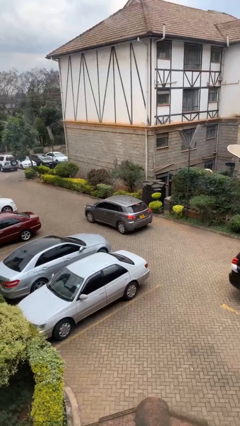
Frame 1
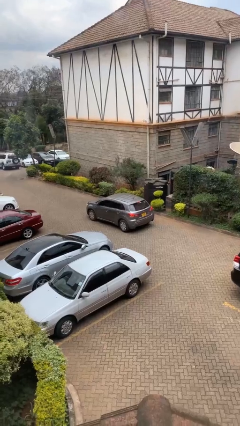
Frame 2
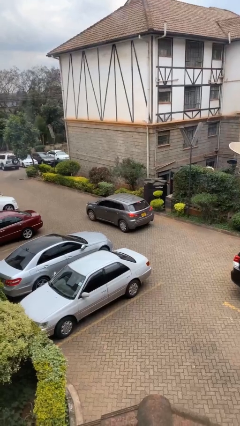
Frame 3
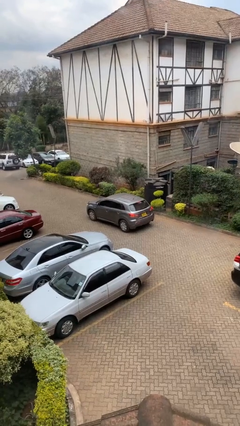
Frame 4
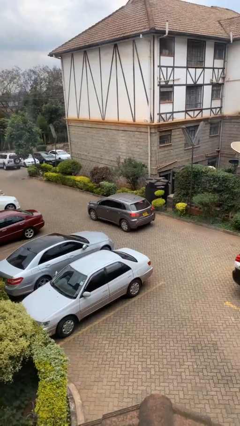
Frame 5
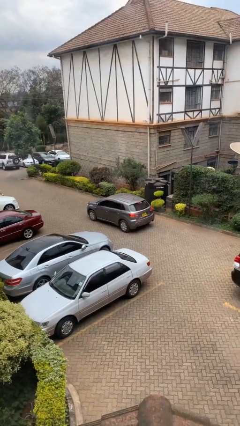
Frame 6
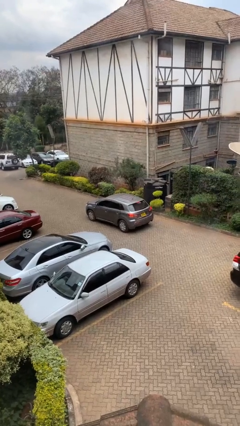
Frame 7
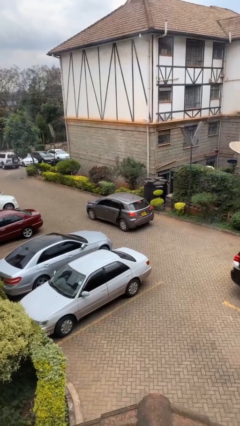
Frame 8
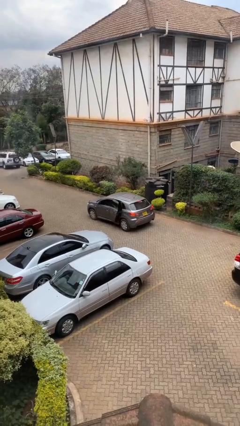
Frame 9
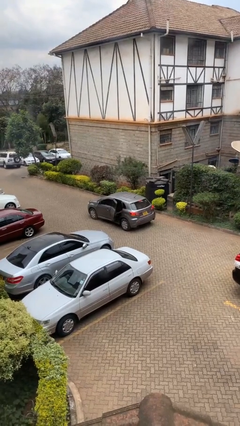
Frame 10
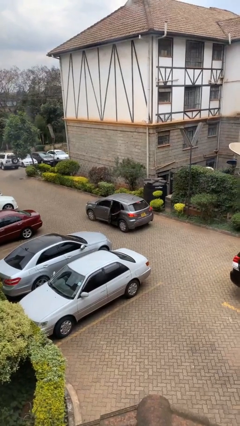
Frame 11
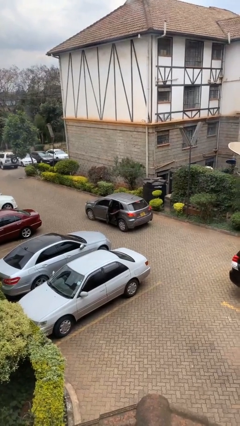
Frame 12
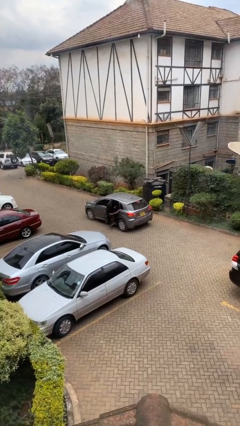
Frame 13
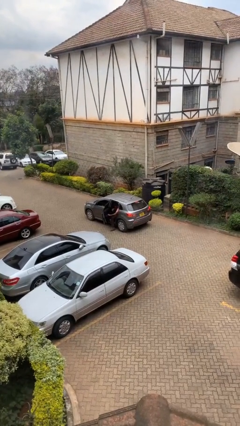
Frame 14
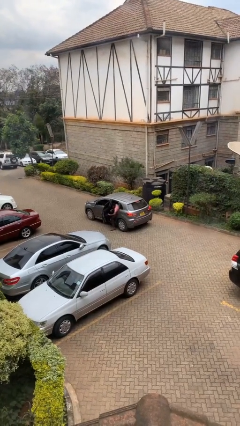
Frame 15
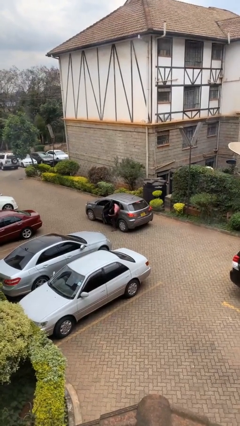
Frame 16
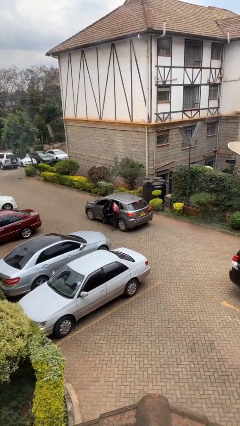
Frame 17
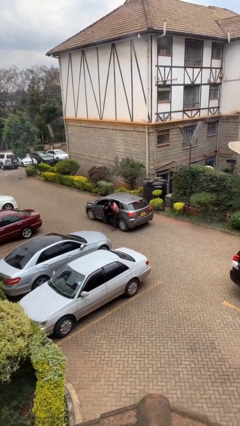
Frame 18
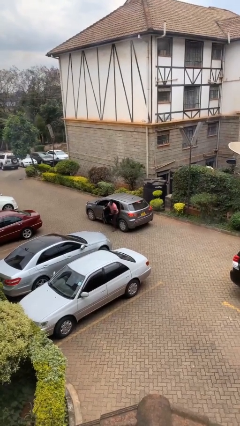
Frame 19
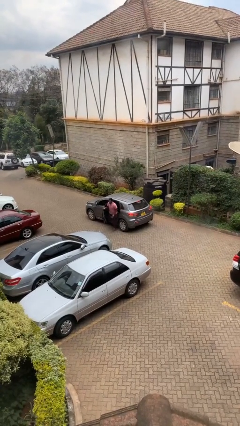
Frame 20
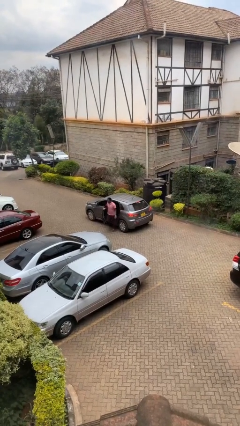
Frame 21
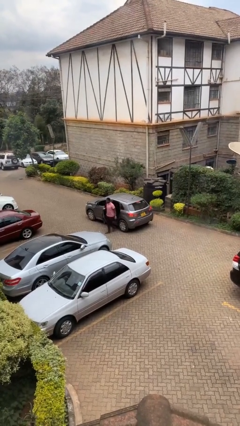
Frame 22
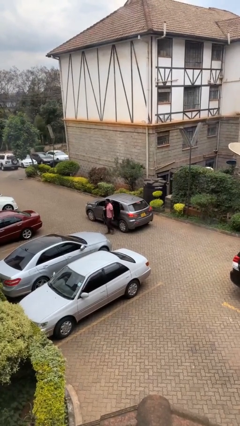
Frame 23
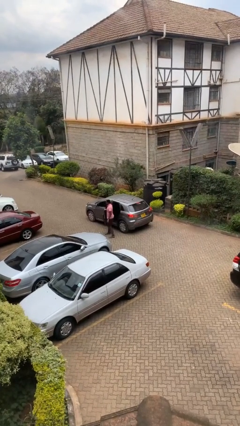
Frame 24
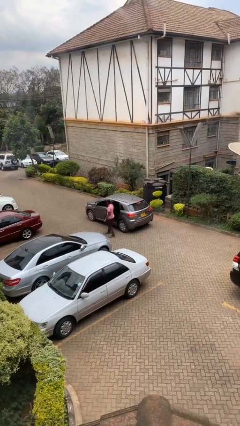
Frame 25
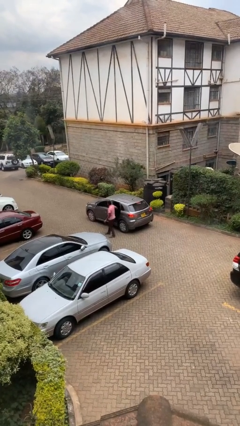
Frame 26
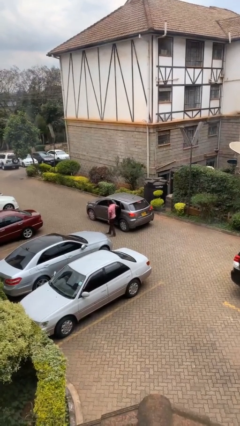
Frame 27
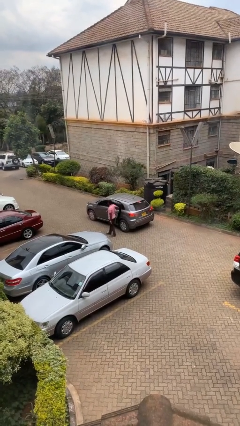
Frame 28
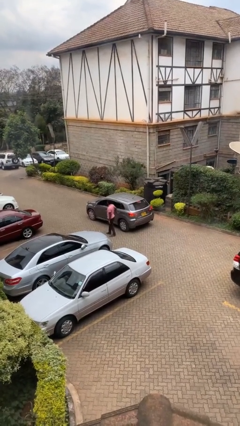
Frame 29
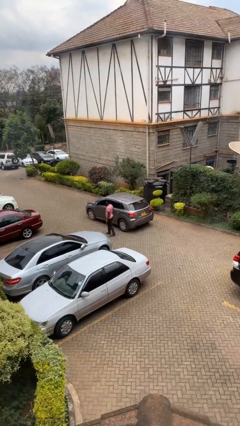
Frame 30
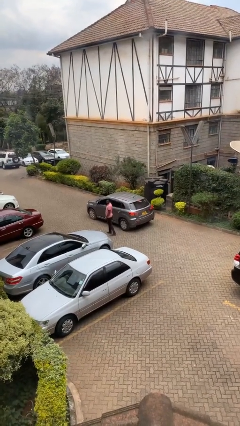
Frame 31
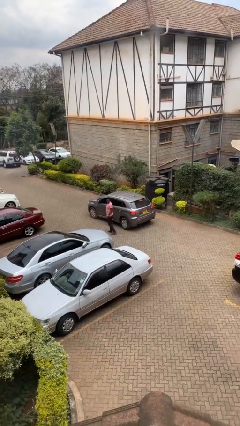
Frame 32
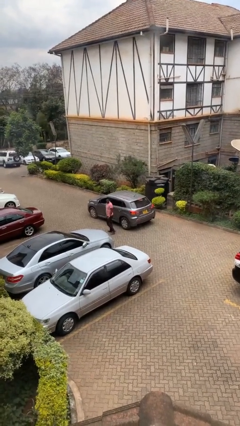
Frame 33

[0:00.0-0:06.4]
car drops off person

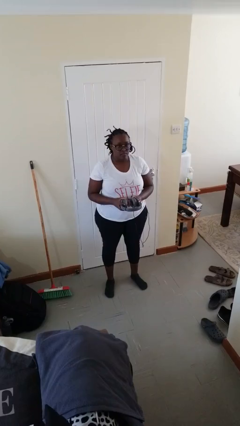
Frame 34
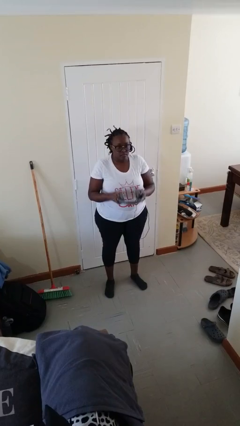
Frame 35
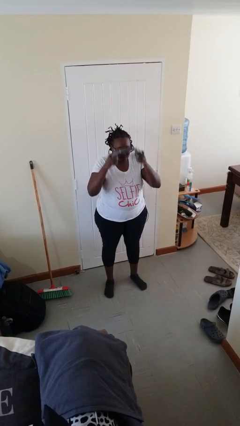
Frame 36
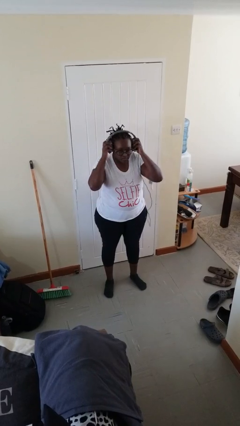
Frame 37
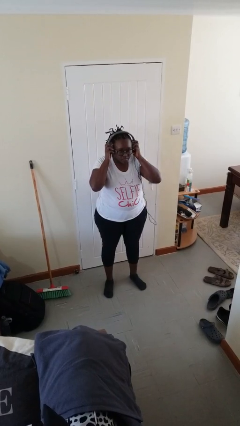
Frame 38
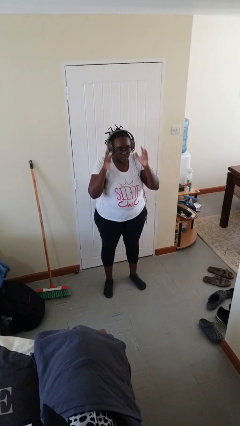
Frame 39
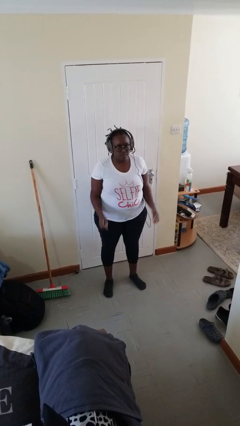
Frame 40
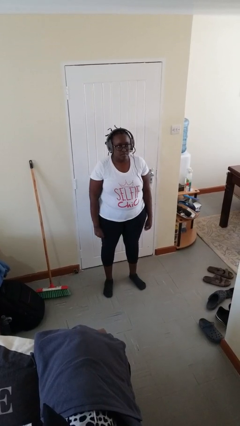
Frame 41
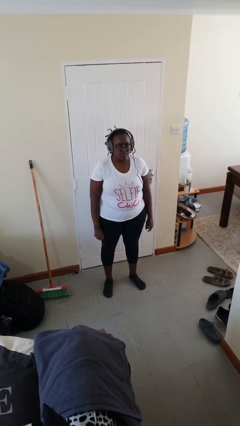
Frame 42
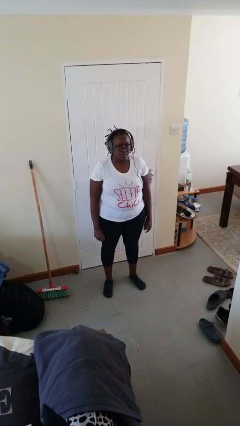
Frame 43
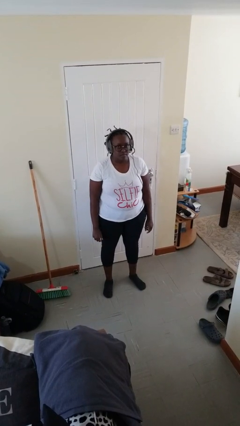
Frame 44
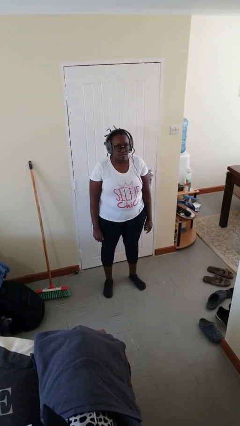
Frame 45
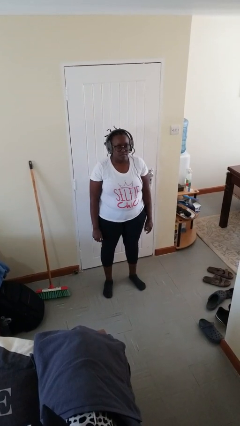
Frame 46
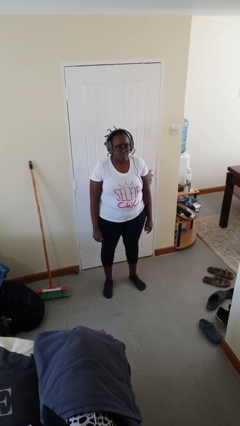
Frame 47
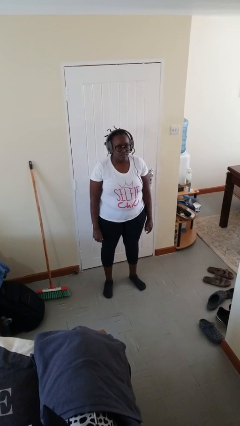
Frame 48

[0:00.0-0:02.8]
person puts on headphones

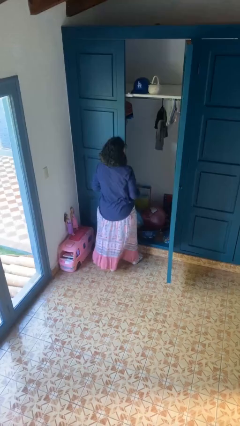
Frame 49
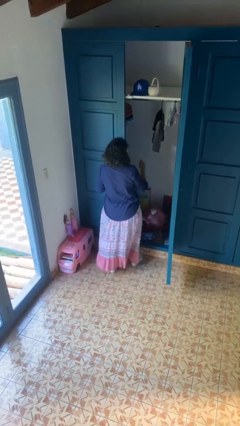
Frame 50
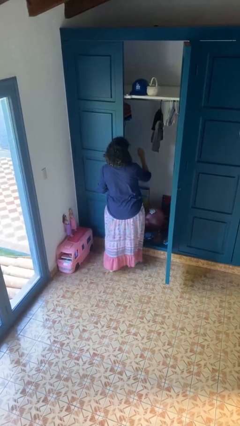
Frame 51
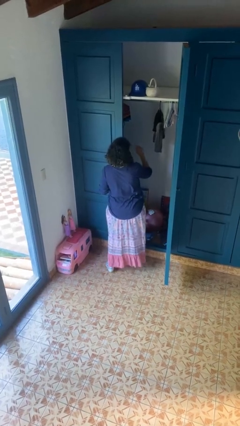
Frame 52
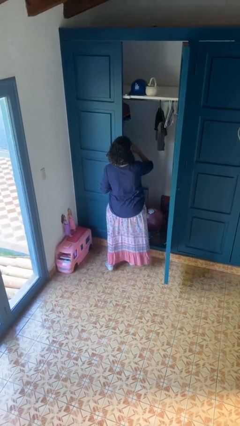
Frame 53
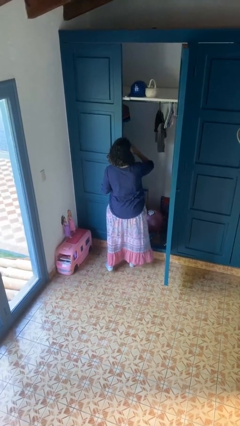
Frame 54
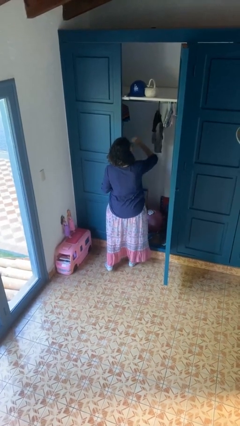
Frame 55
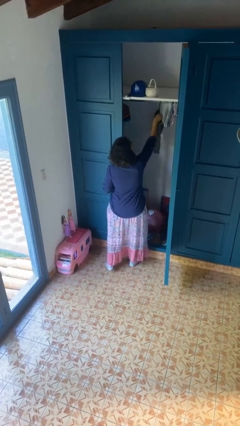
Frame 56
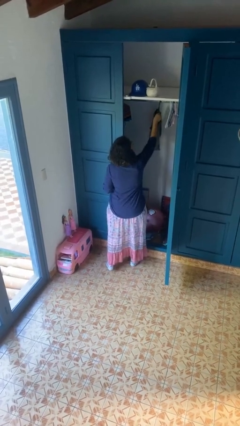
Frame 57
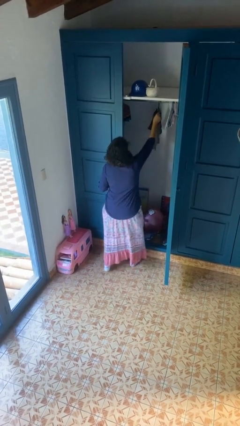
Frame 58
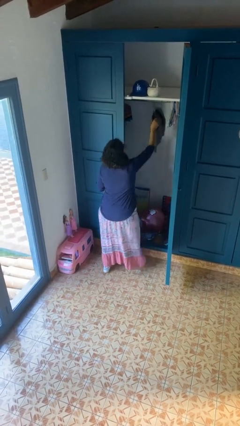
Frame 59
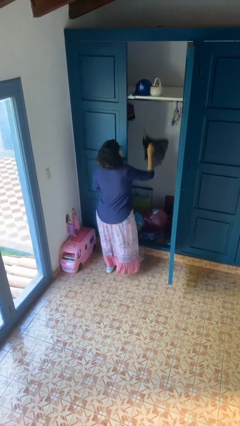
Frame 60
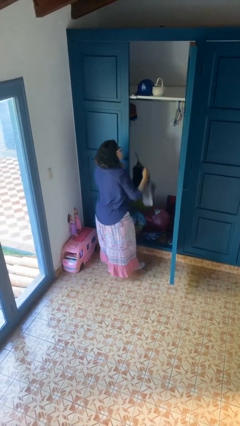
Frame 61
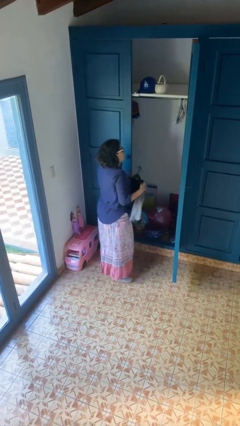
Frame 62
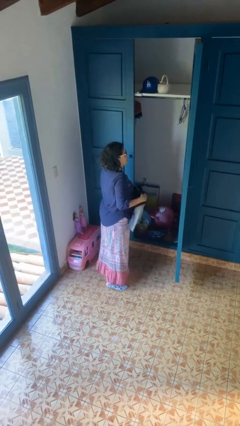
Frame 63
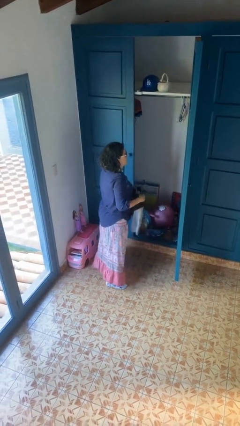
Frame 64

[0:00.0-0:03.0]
person takes clothes from closet

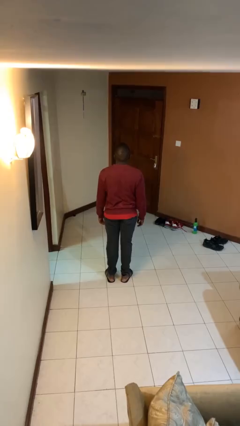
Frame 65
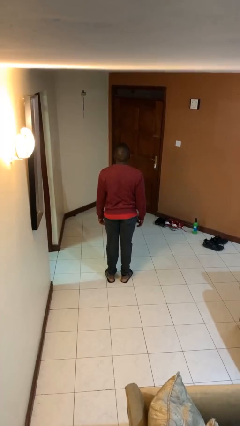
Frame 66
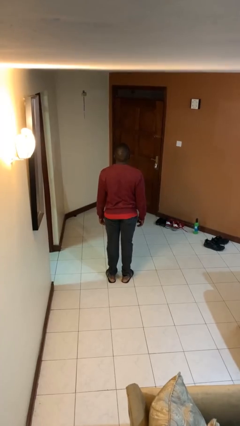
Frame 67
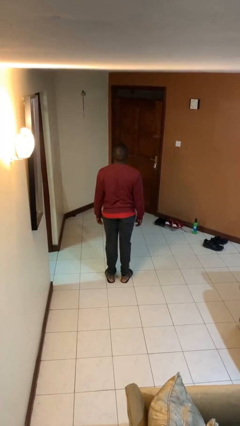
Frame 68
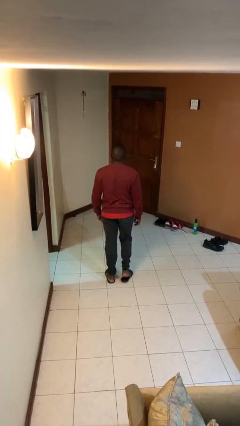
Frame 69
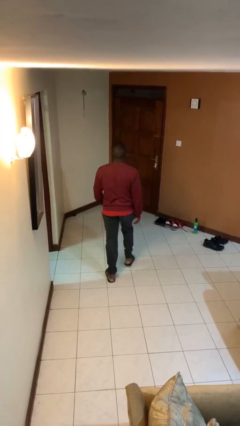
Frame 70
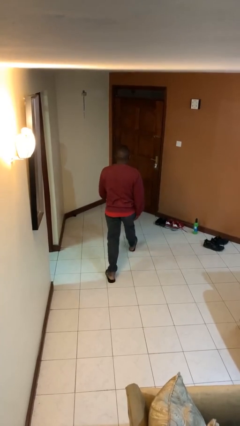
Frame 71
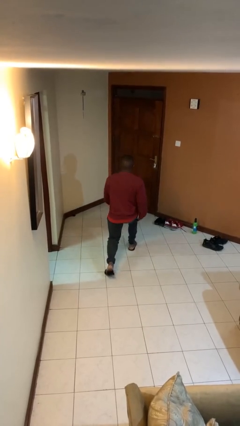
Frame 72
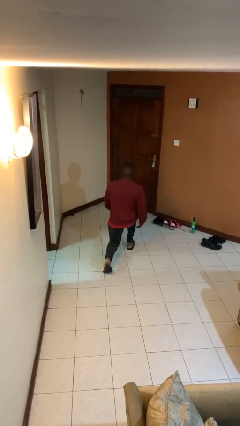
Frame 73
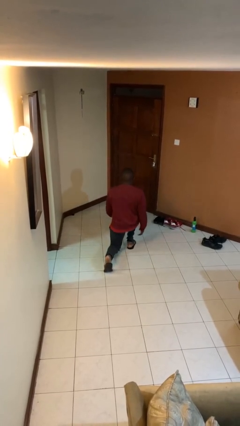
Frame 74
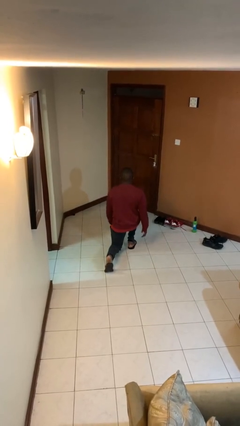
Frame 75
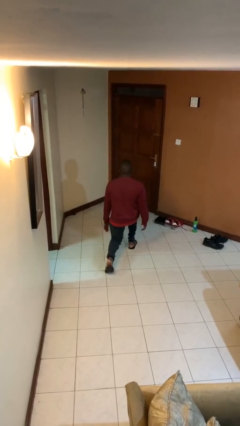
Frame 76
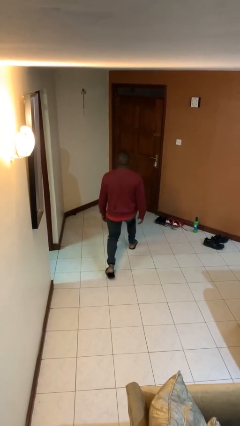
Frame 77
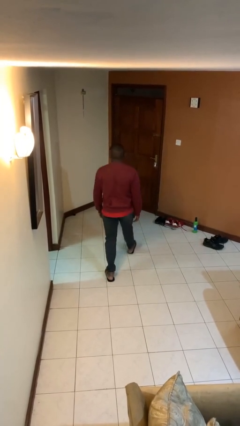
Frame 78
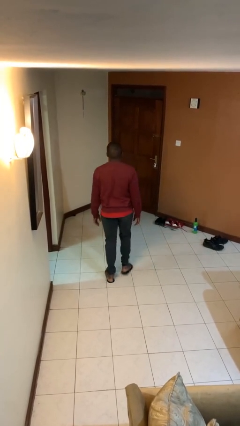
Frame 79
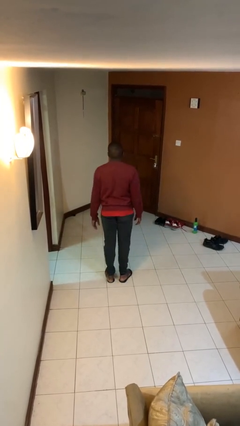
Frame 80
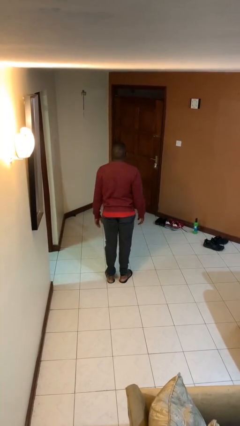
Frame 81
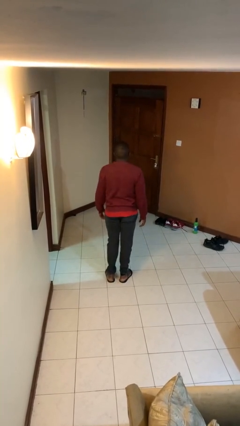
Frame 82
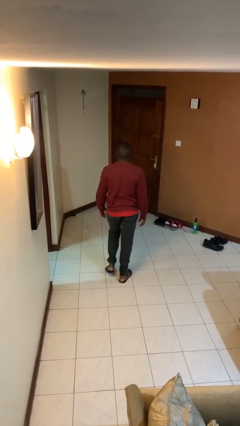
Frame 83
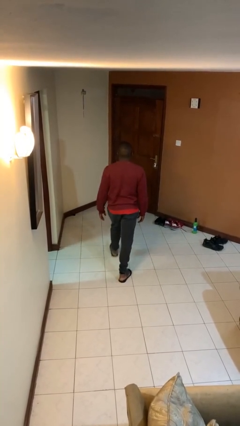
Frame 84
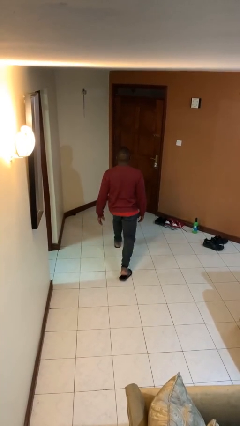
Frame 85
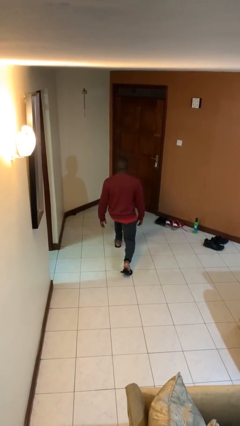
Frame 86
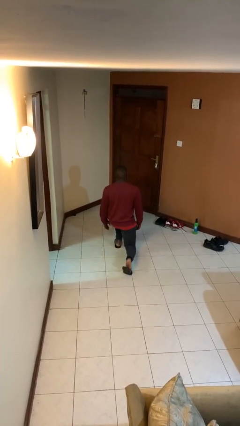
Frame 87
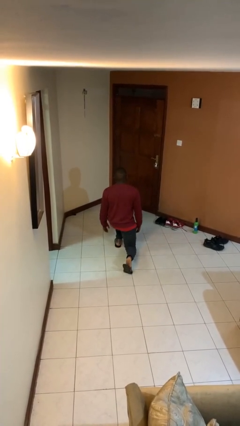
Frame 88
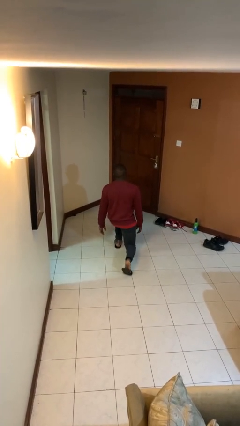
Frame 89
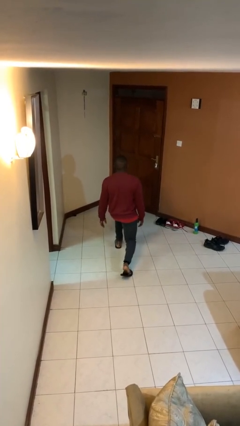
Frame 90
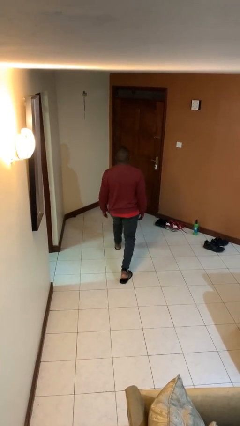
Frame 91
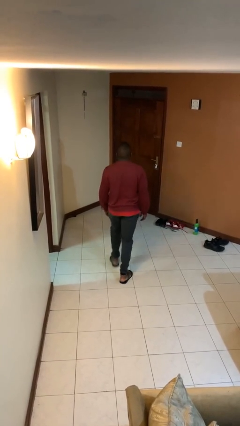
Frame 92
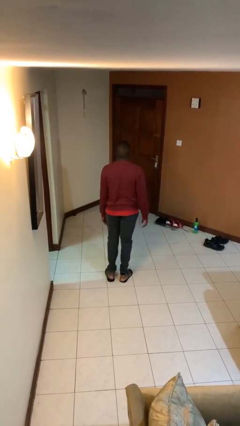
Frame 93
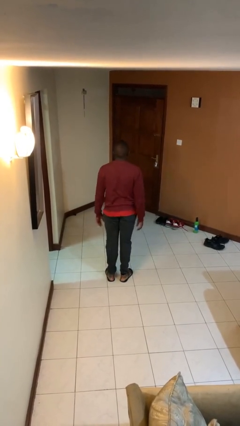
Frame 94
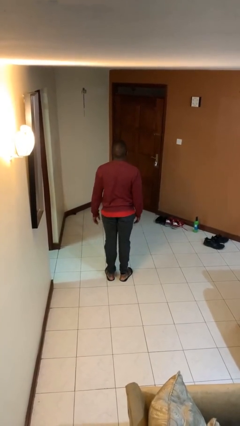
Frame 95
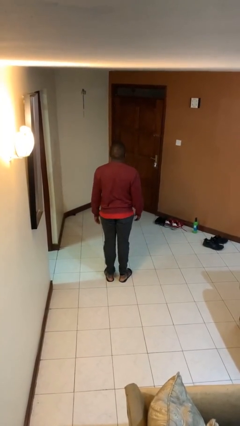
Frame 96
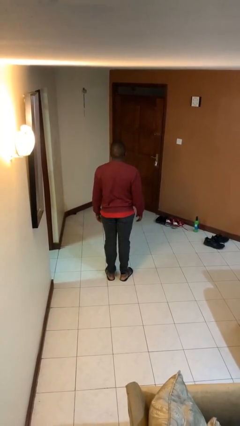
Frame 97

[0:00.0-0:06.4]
person exercises with lunges
